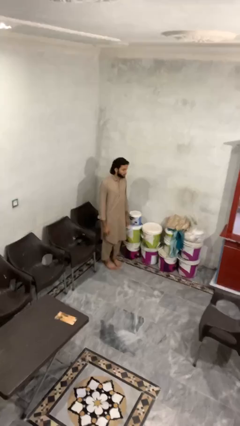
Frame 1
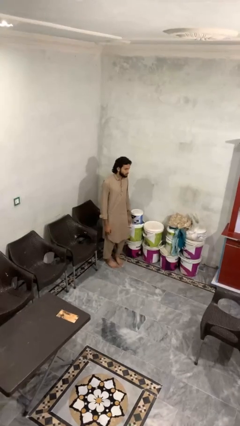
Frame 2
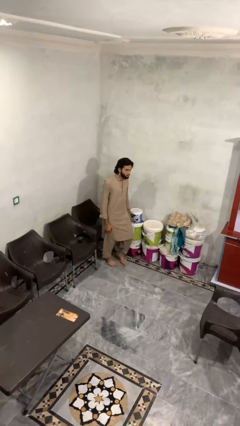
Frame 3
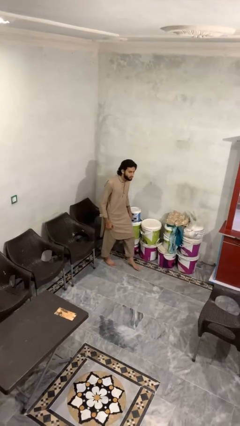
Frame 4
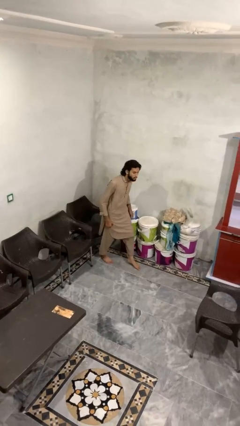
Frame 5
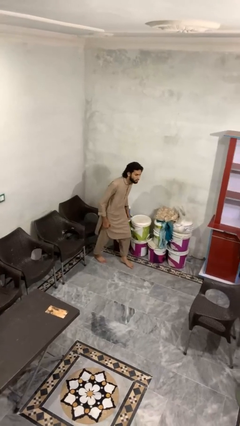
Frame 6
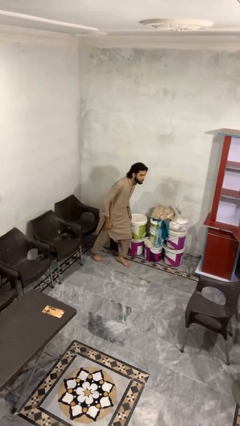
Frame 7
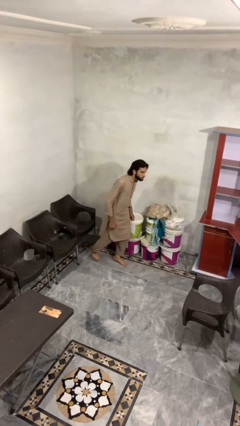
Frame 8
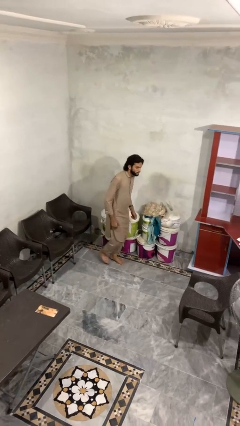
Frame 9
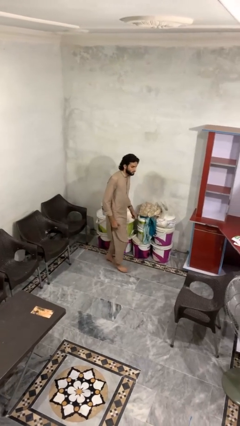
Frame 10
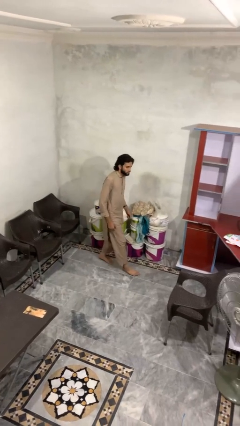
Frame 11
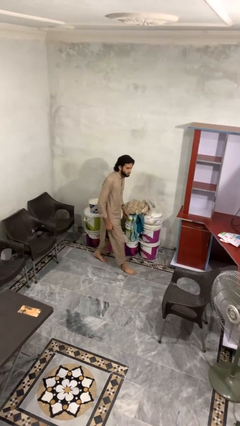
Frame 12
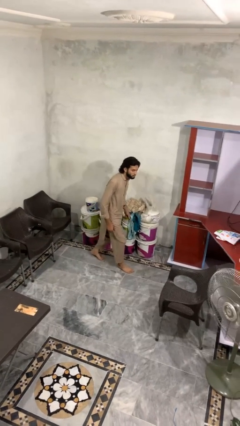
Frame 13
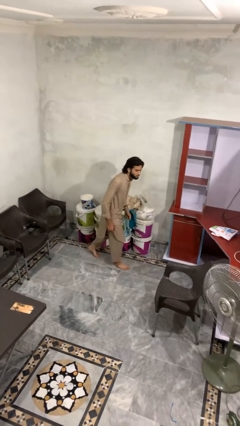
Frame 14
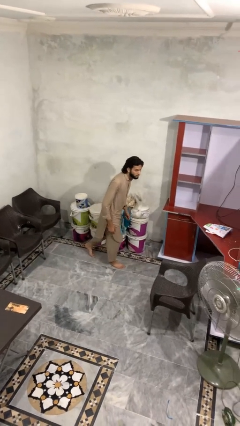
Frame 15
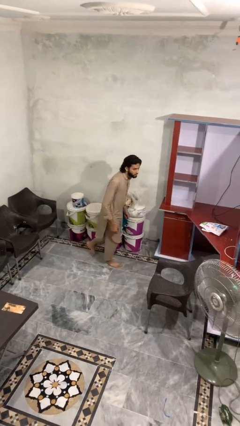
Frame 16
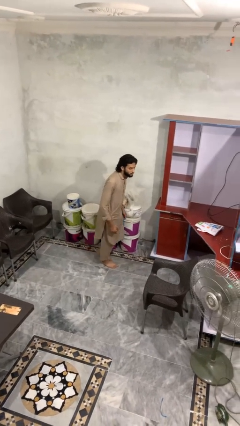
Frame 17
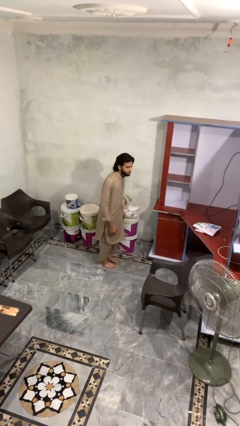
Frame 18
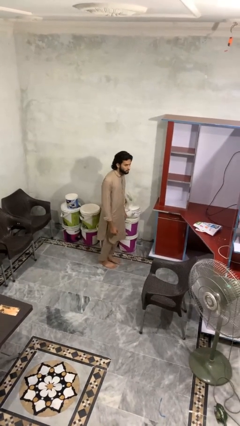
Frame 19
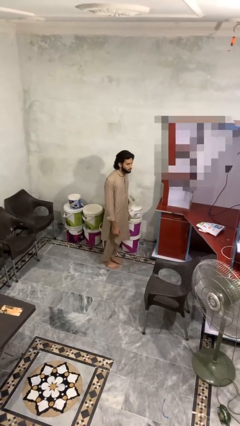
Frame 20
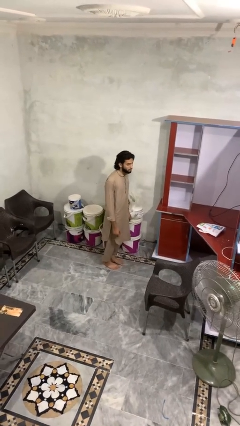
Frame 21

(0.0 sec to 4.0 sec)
person walks tiptoe

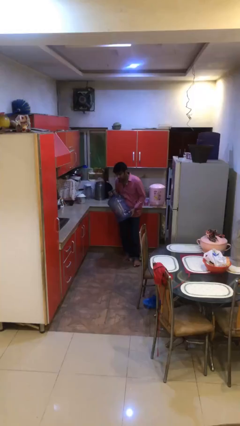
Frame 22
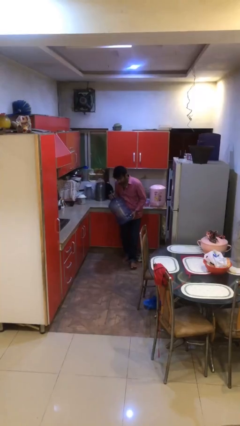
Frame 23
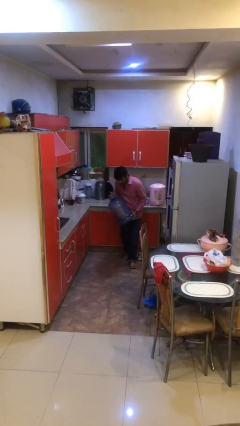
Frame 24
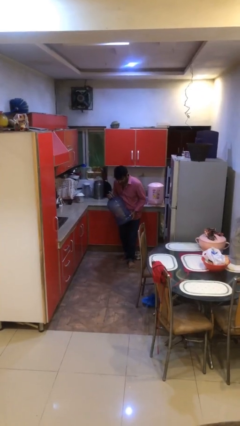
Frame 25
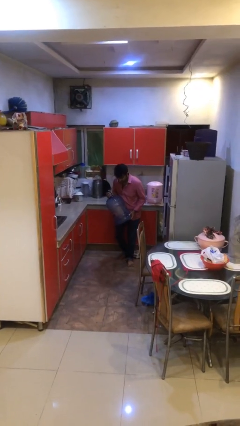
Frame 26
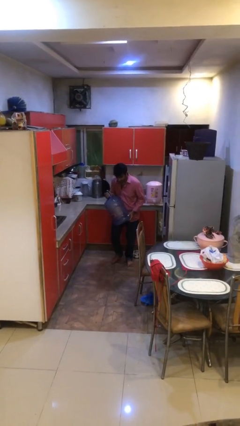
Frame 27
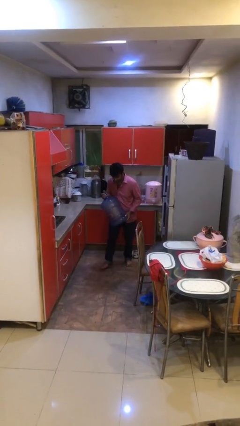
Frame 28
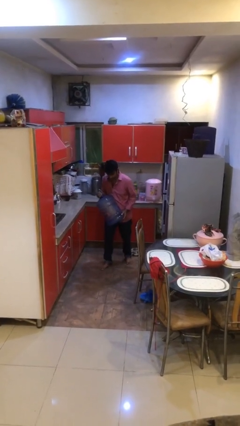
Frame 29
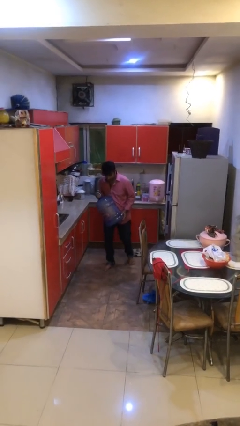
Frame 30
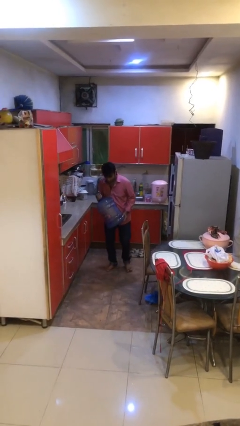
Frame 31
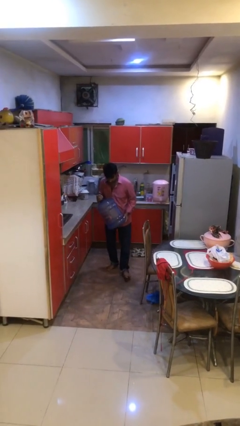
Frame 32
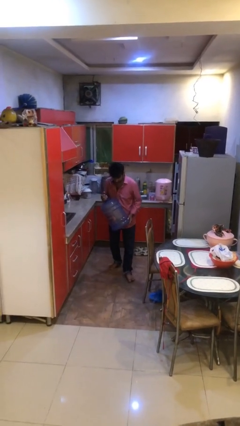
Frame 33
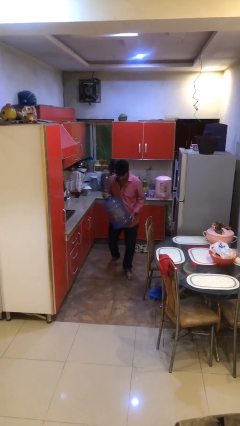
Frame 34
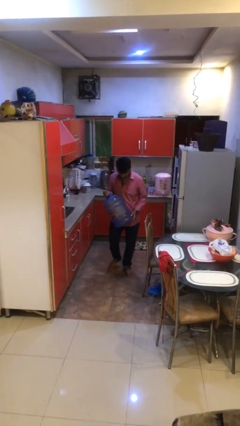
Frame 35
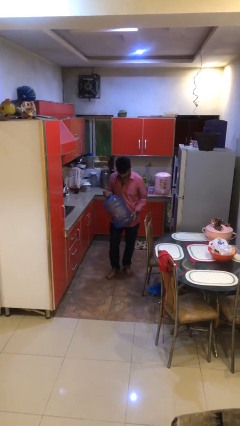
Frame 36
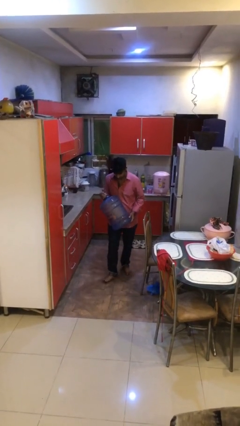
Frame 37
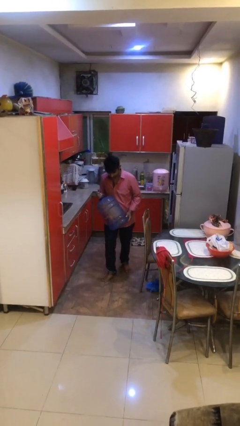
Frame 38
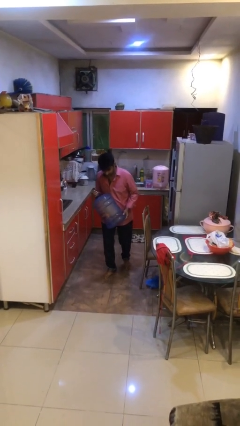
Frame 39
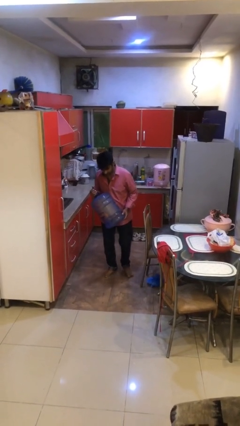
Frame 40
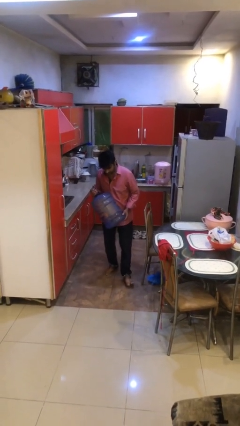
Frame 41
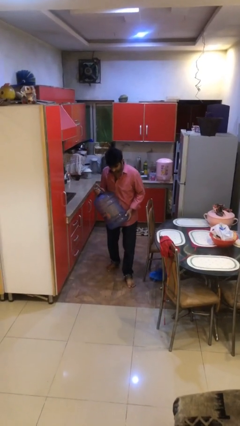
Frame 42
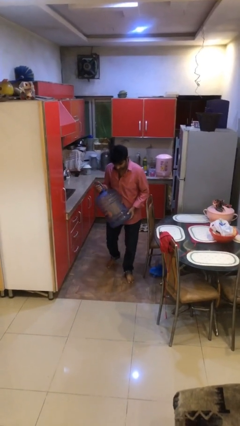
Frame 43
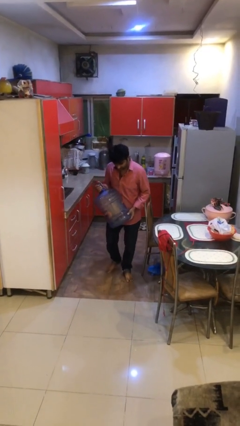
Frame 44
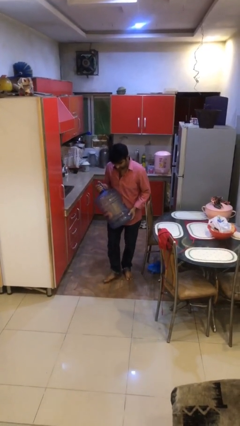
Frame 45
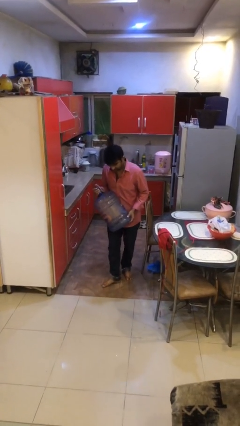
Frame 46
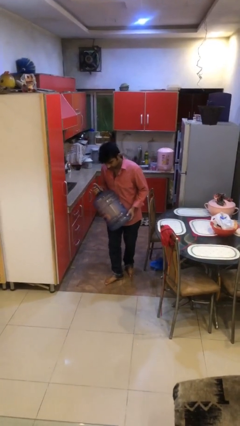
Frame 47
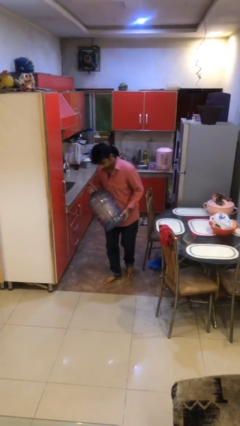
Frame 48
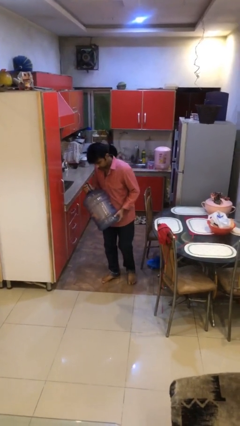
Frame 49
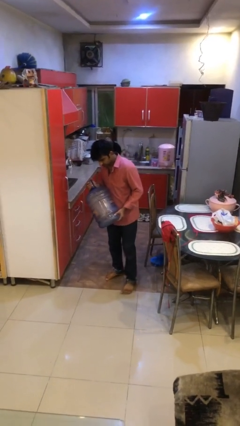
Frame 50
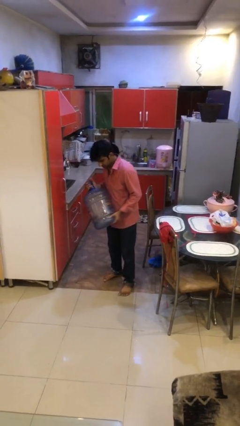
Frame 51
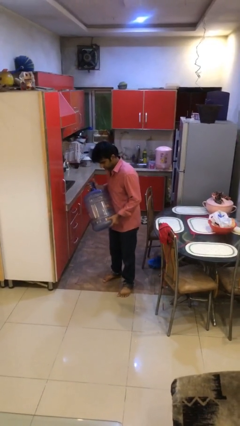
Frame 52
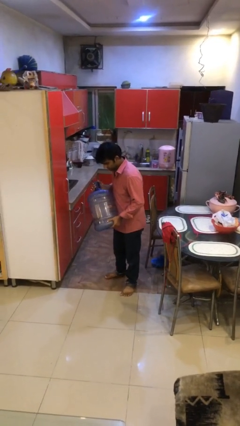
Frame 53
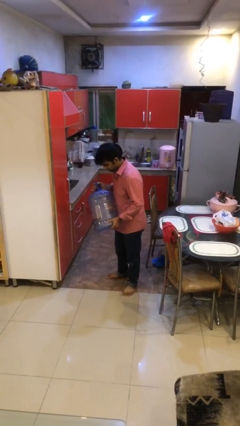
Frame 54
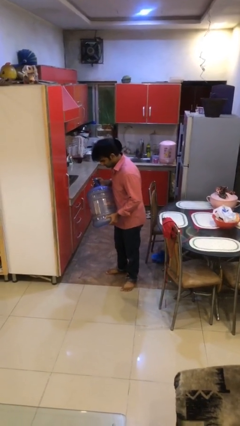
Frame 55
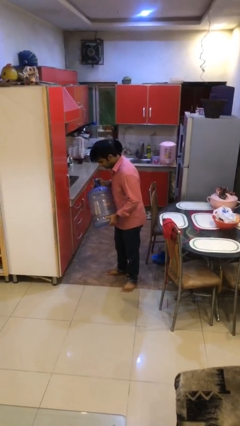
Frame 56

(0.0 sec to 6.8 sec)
person carries heavy object

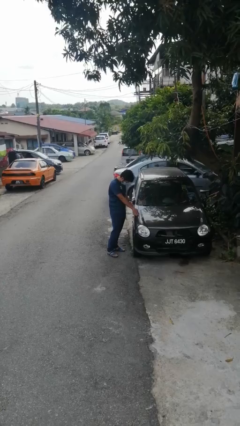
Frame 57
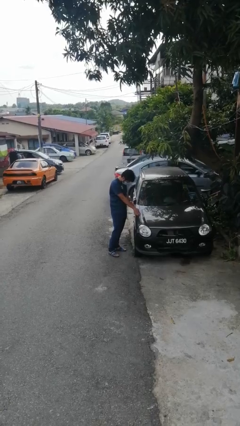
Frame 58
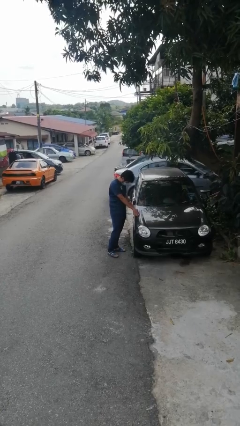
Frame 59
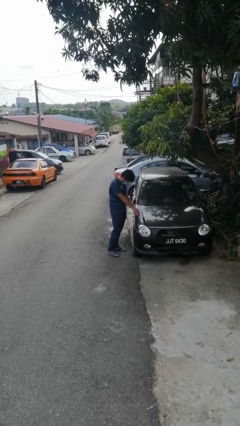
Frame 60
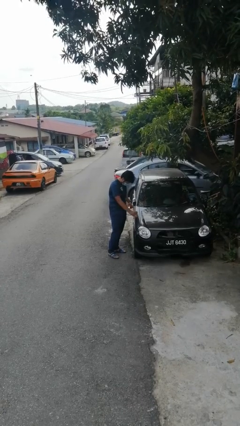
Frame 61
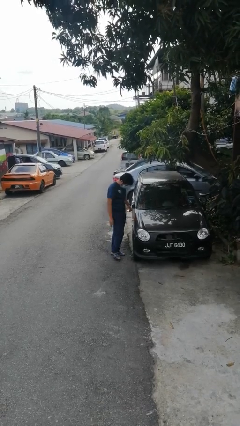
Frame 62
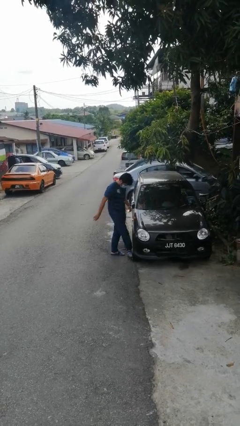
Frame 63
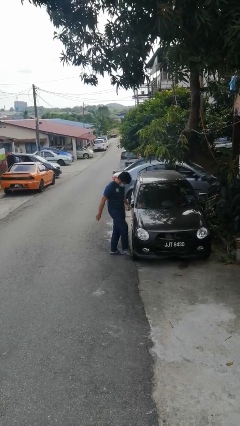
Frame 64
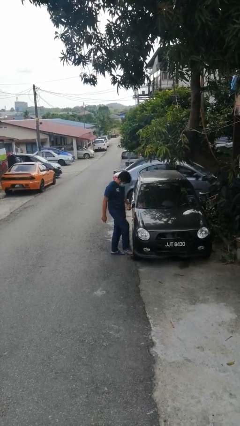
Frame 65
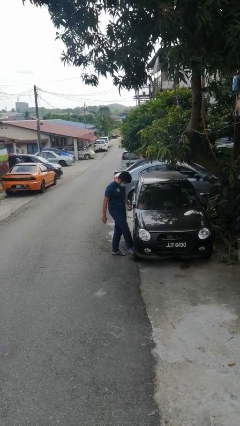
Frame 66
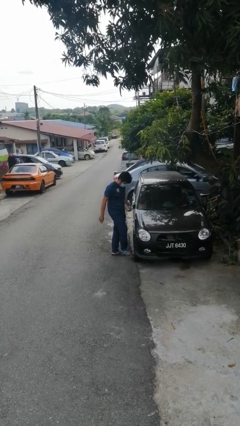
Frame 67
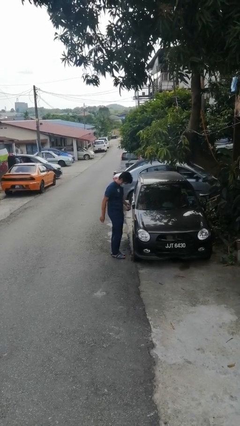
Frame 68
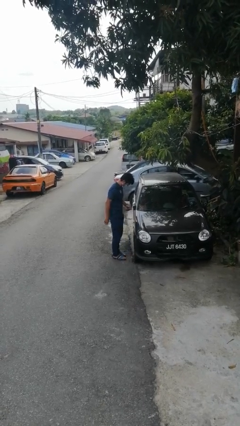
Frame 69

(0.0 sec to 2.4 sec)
person kicks car tires

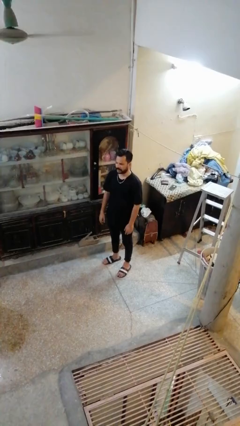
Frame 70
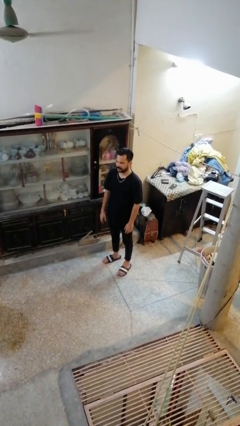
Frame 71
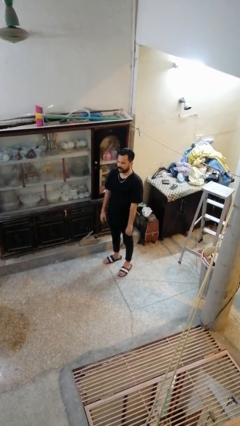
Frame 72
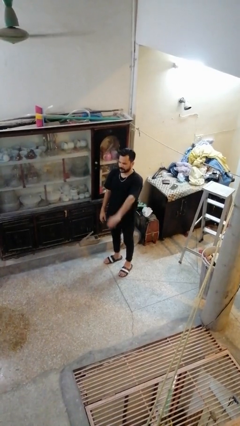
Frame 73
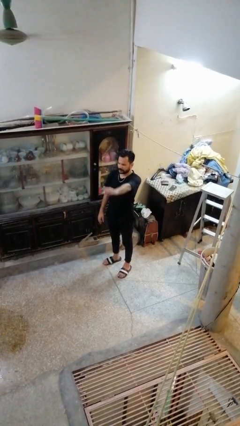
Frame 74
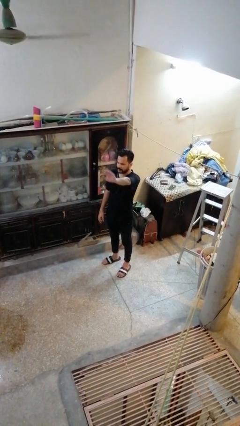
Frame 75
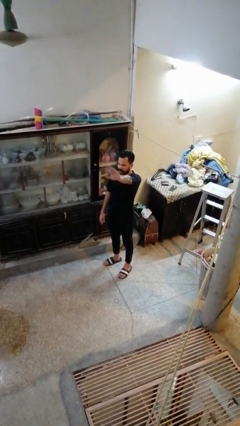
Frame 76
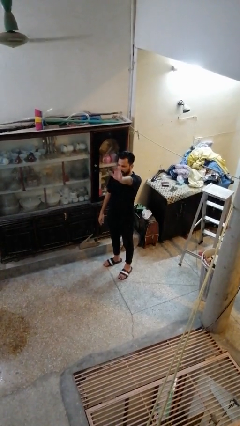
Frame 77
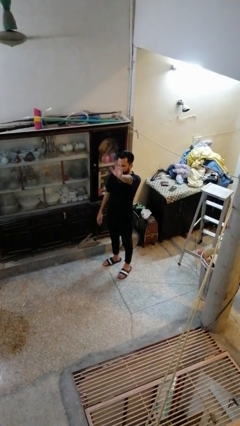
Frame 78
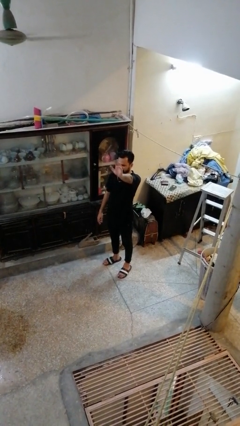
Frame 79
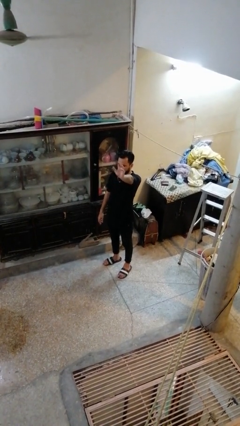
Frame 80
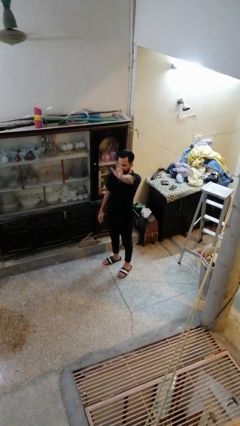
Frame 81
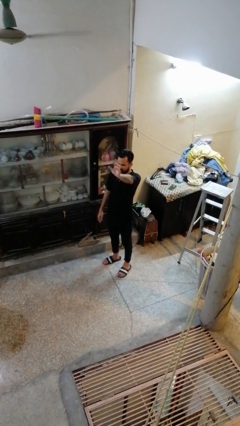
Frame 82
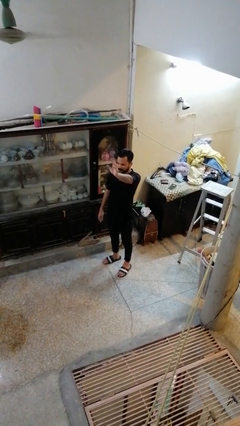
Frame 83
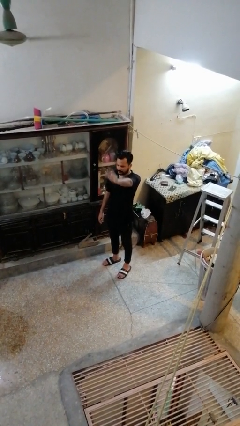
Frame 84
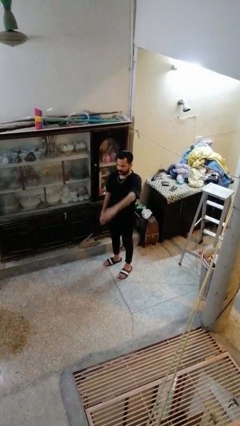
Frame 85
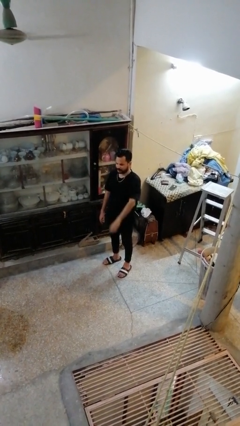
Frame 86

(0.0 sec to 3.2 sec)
person waves at person

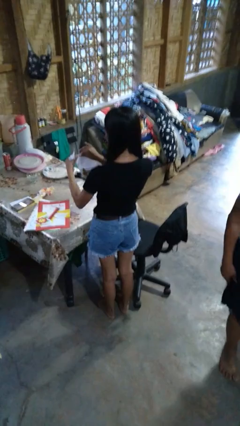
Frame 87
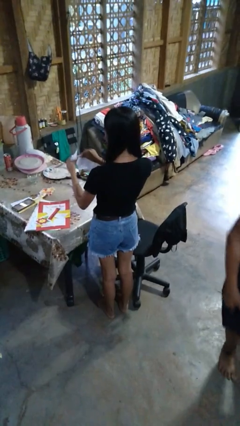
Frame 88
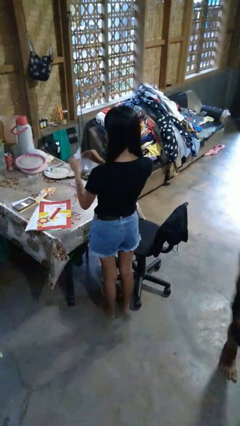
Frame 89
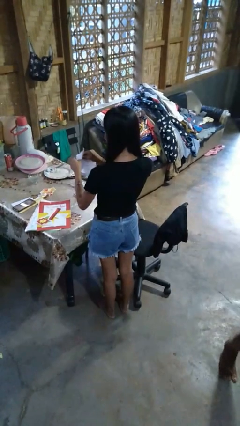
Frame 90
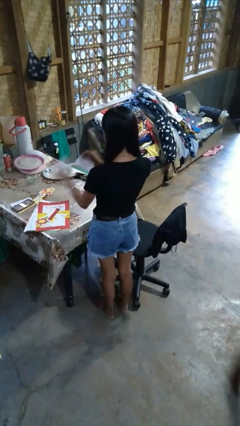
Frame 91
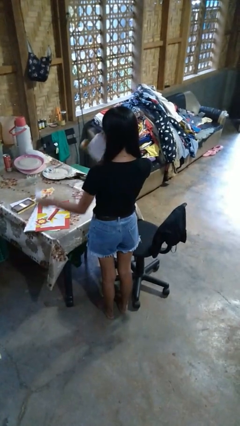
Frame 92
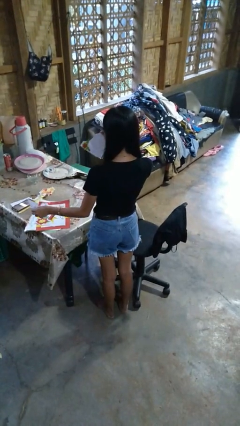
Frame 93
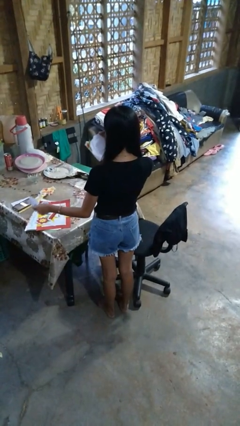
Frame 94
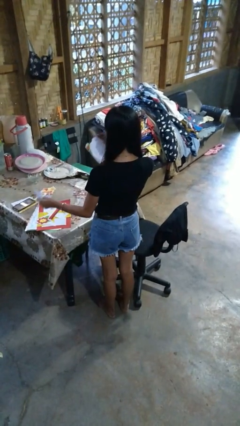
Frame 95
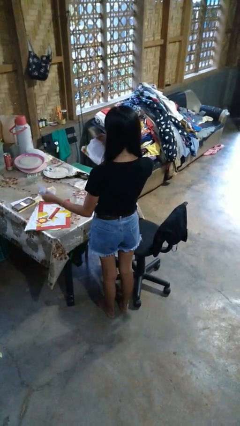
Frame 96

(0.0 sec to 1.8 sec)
person tears paper
